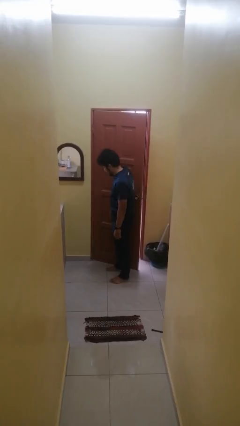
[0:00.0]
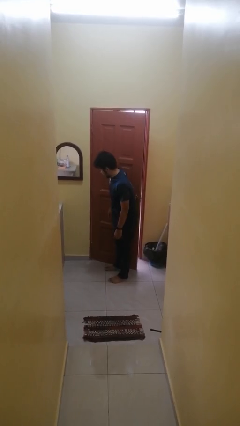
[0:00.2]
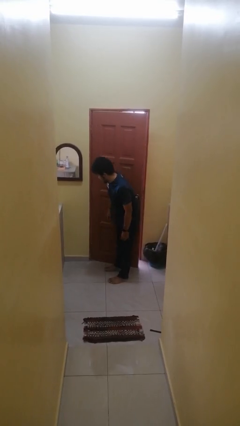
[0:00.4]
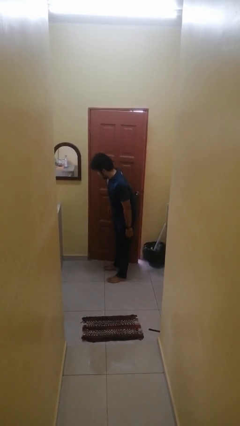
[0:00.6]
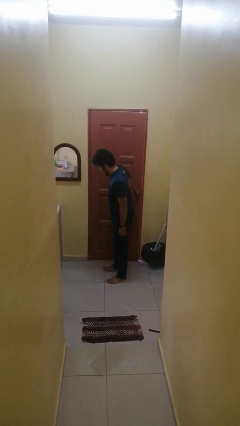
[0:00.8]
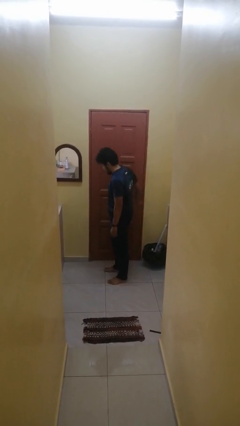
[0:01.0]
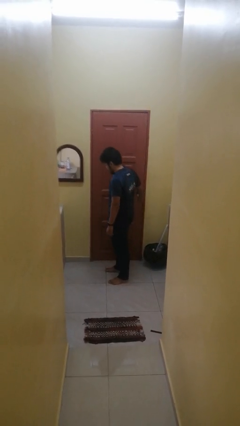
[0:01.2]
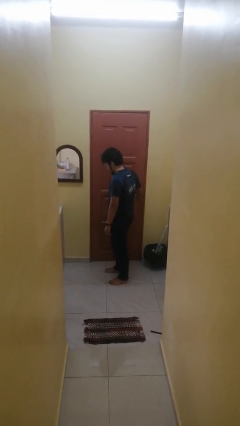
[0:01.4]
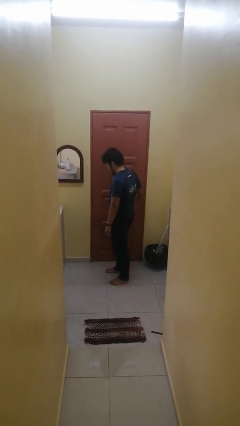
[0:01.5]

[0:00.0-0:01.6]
person closes door with hip

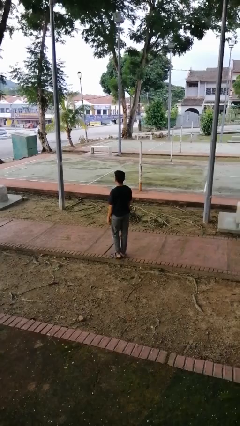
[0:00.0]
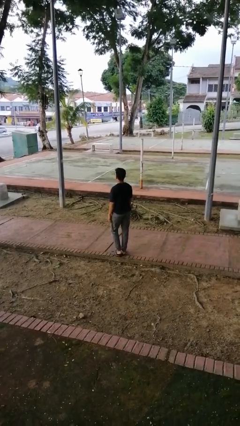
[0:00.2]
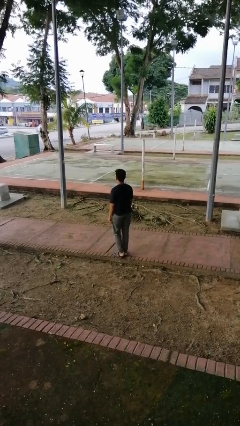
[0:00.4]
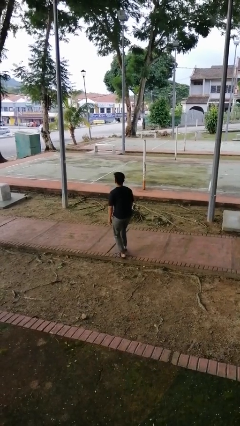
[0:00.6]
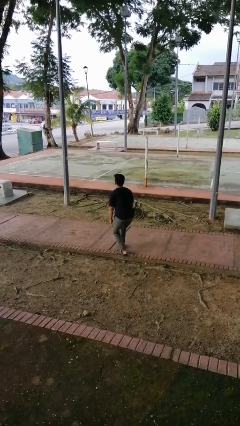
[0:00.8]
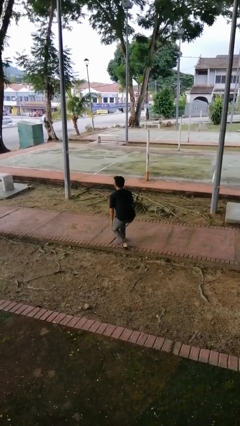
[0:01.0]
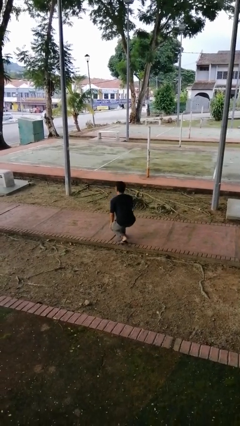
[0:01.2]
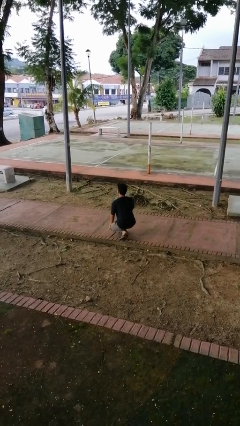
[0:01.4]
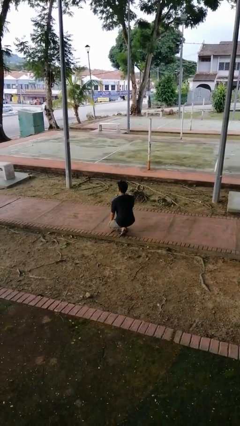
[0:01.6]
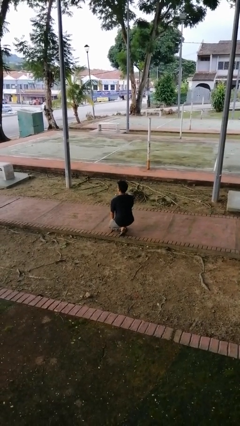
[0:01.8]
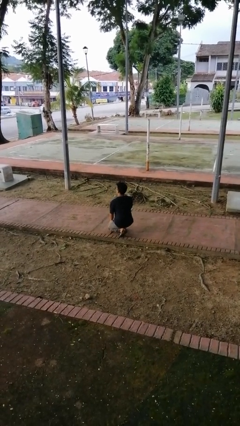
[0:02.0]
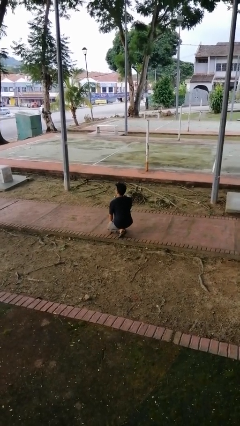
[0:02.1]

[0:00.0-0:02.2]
person kneels

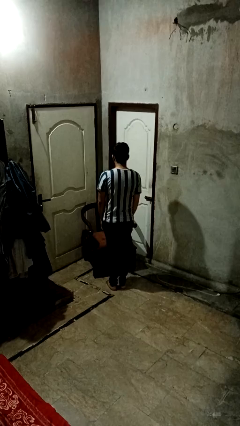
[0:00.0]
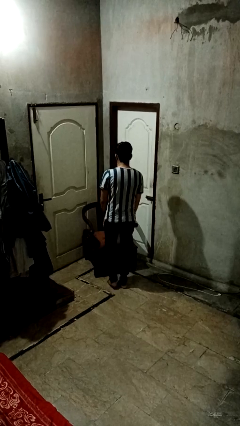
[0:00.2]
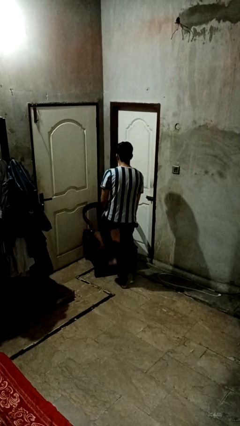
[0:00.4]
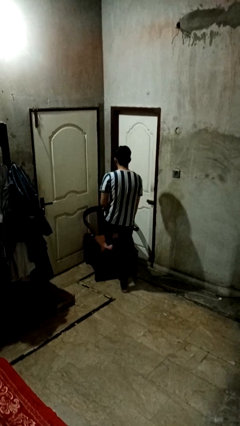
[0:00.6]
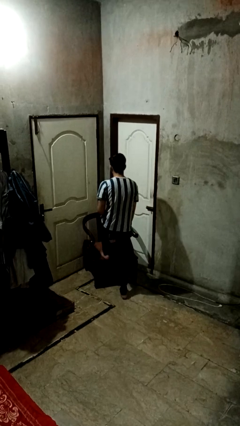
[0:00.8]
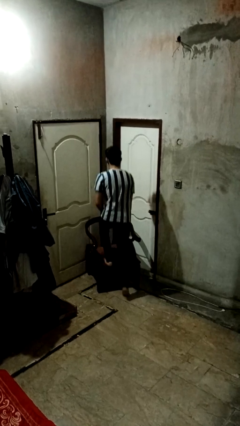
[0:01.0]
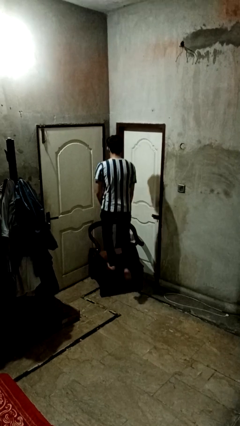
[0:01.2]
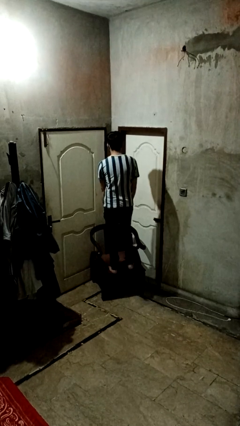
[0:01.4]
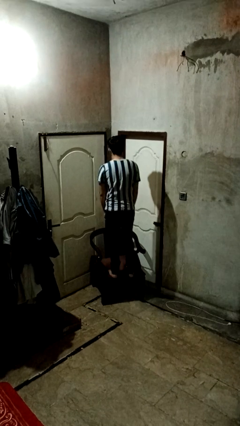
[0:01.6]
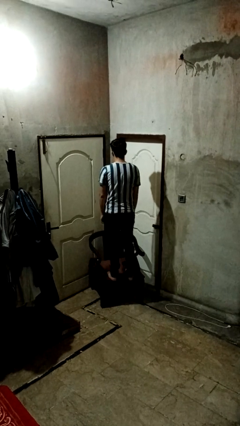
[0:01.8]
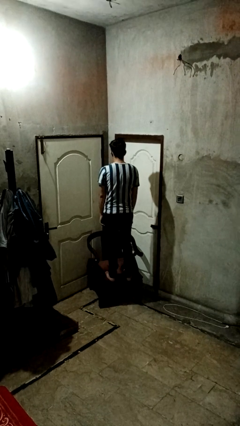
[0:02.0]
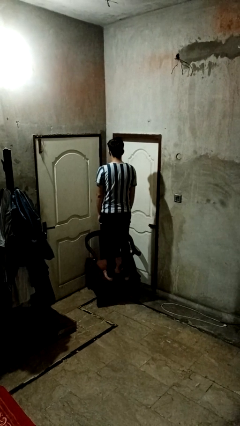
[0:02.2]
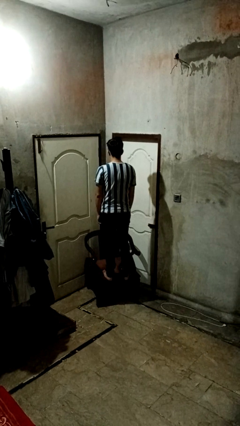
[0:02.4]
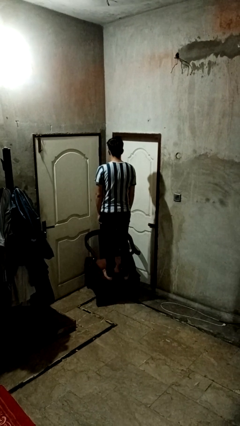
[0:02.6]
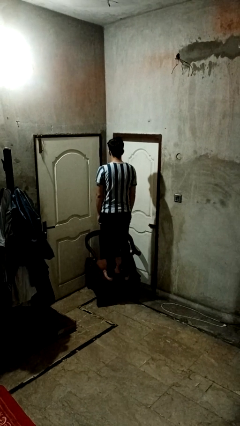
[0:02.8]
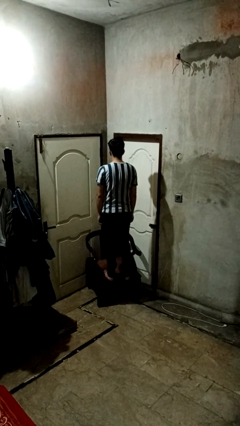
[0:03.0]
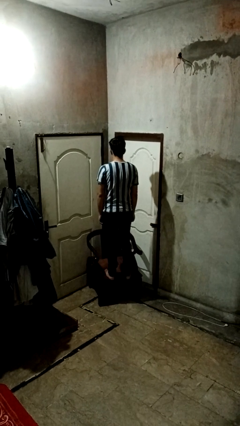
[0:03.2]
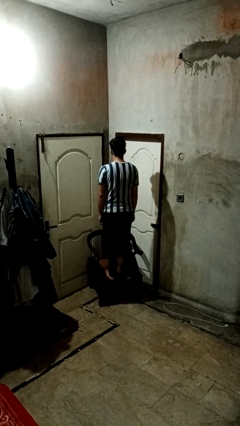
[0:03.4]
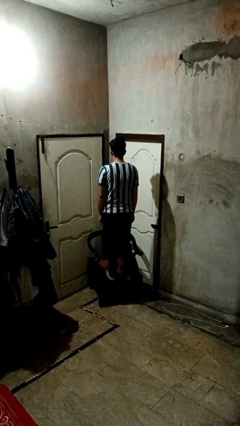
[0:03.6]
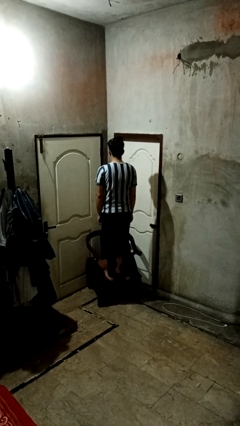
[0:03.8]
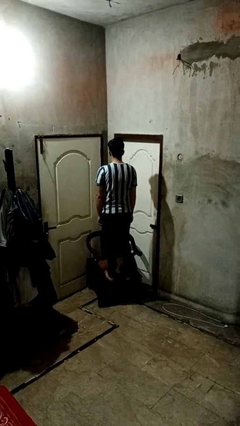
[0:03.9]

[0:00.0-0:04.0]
person climbs on couch

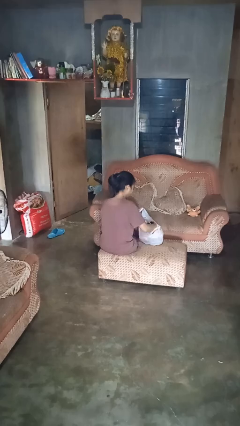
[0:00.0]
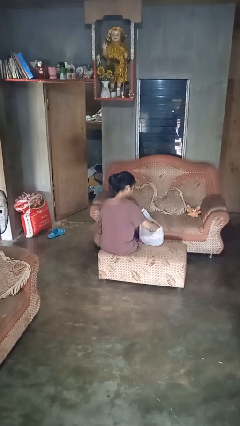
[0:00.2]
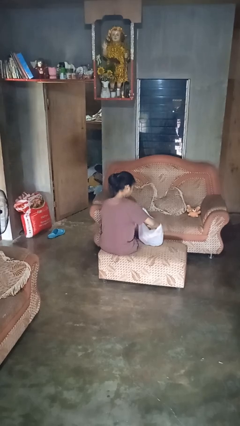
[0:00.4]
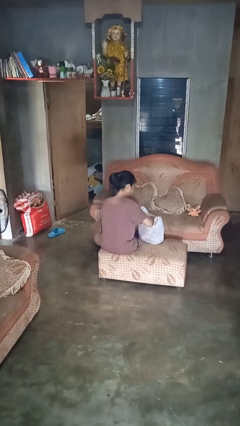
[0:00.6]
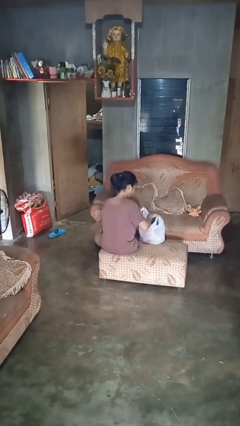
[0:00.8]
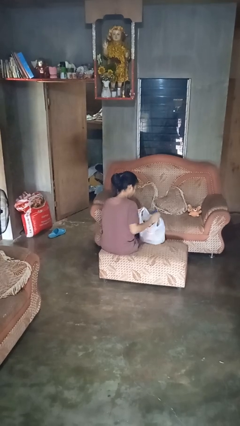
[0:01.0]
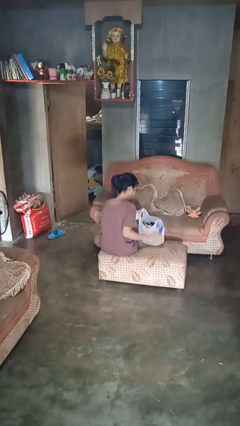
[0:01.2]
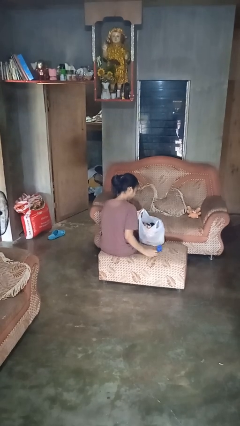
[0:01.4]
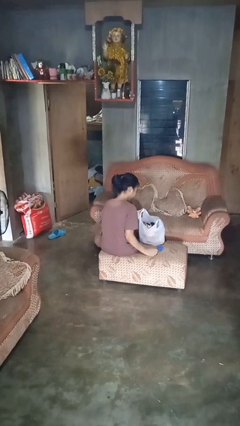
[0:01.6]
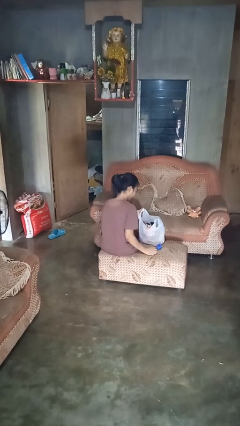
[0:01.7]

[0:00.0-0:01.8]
person takes object from bag

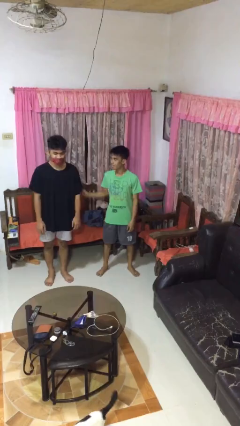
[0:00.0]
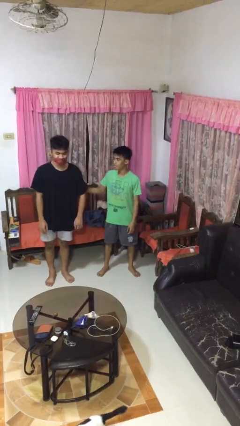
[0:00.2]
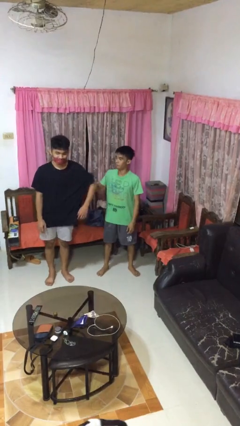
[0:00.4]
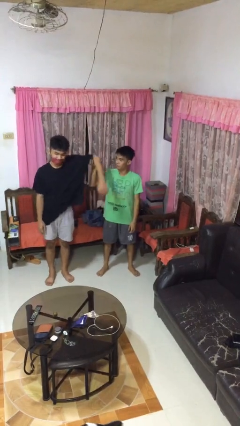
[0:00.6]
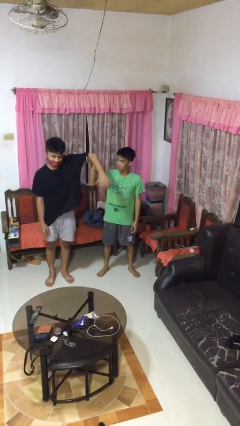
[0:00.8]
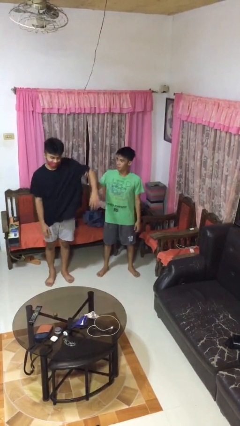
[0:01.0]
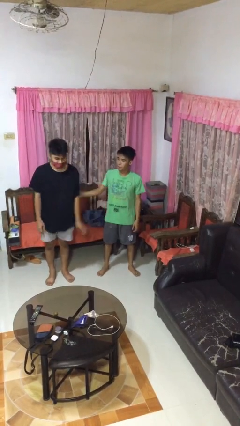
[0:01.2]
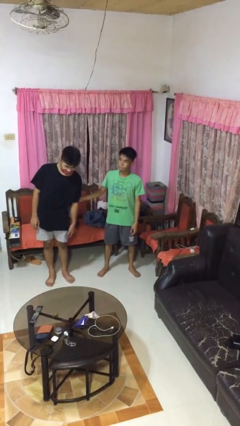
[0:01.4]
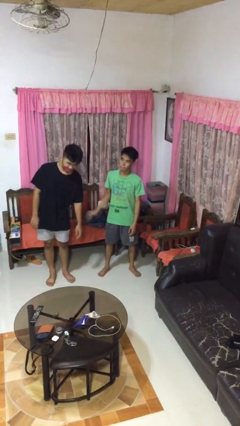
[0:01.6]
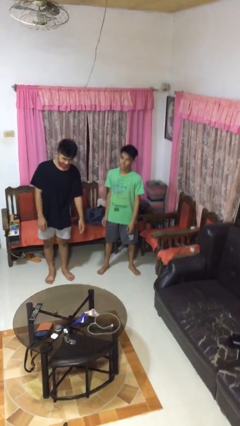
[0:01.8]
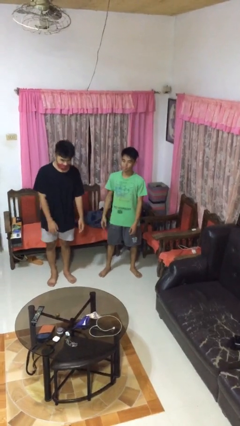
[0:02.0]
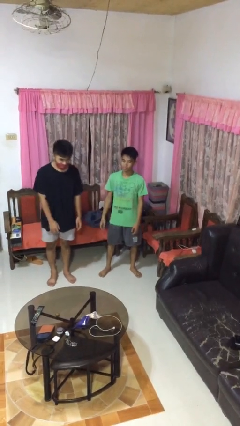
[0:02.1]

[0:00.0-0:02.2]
person grabs person by bicep

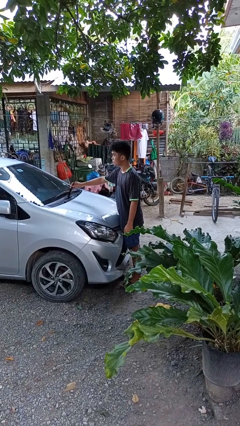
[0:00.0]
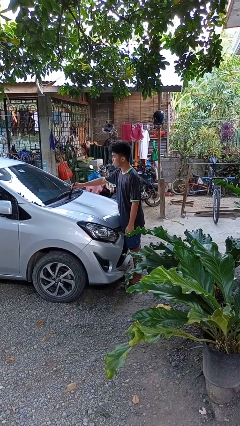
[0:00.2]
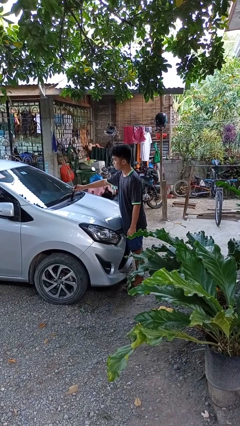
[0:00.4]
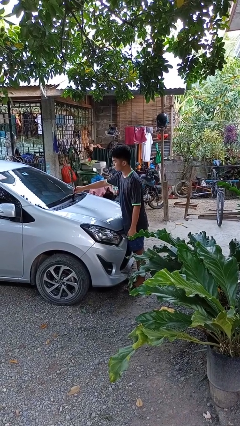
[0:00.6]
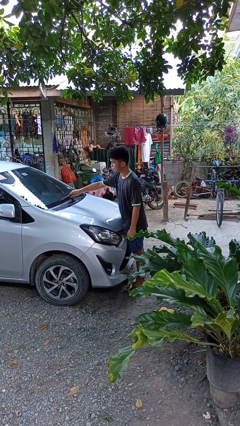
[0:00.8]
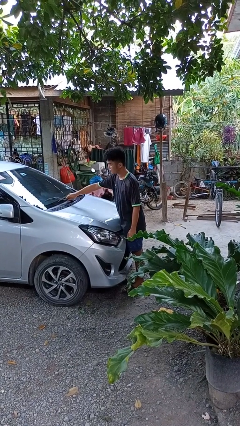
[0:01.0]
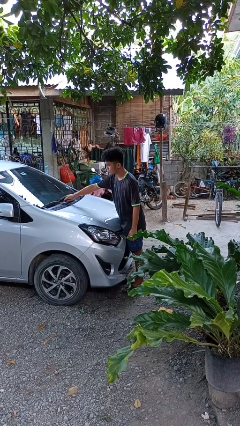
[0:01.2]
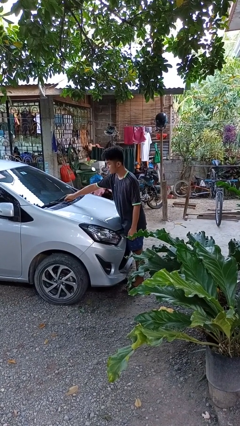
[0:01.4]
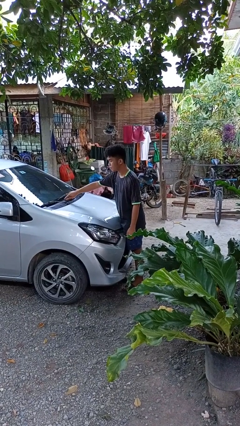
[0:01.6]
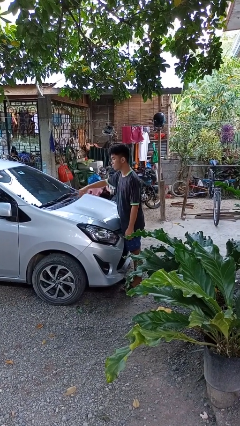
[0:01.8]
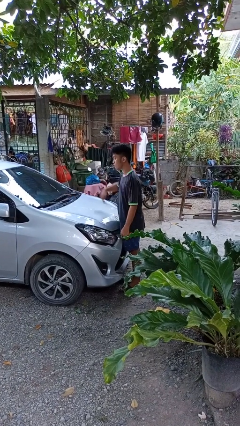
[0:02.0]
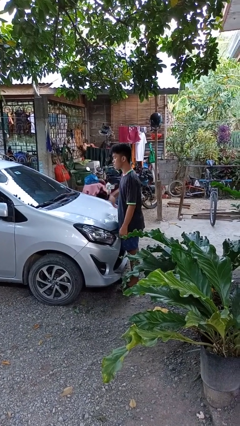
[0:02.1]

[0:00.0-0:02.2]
person flips down car wipers

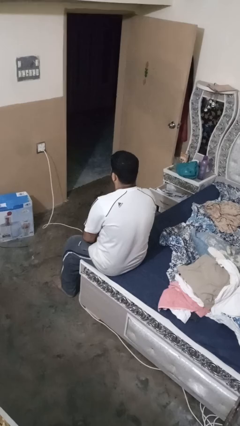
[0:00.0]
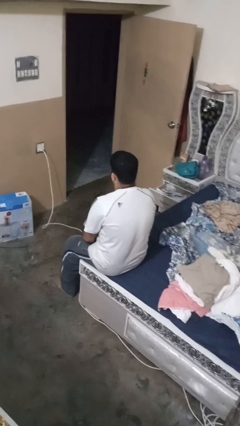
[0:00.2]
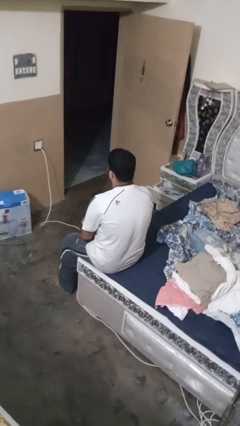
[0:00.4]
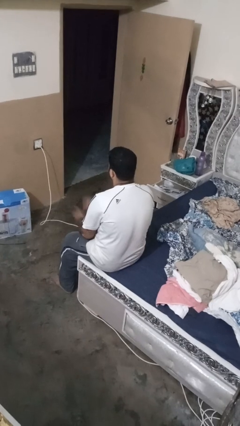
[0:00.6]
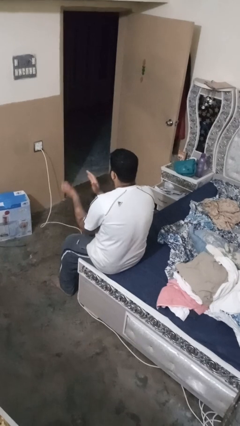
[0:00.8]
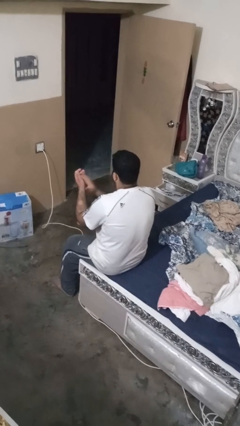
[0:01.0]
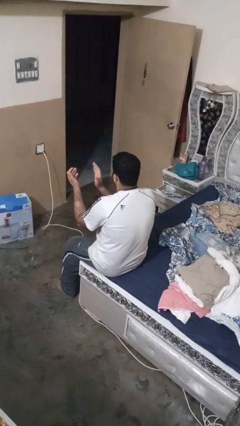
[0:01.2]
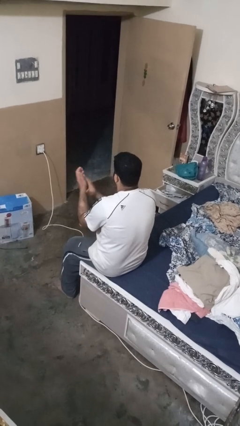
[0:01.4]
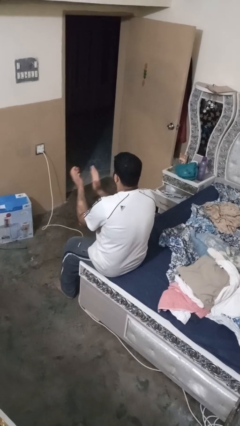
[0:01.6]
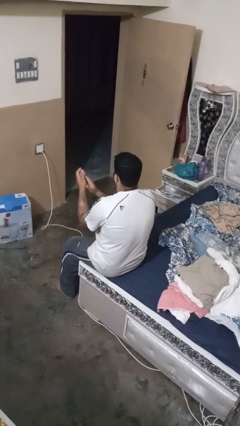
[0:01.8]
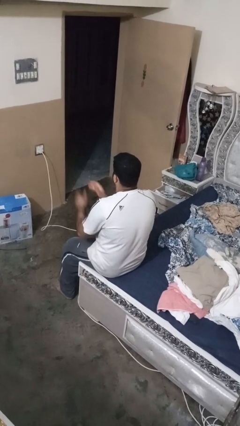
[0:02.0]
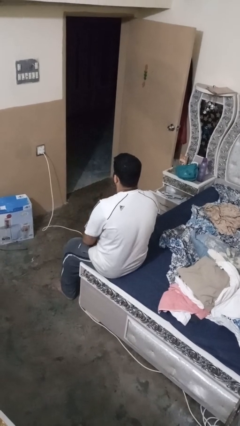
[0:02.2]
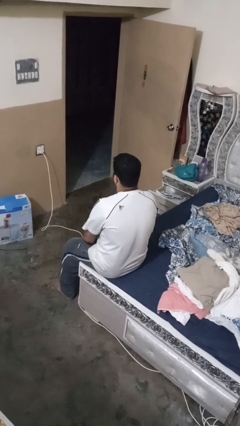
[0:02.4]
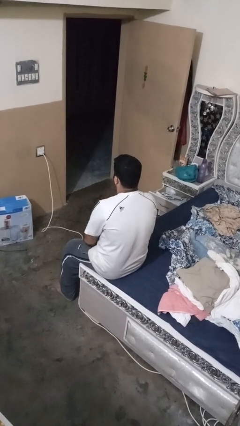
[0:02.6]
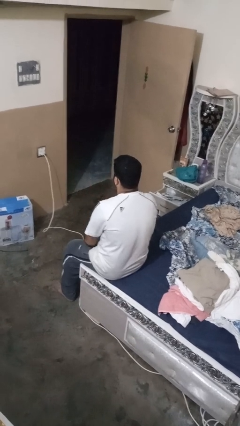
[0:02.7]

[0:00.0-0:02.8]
person claps hands
